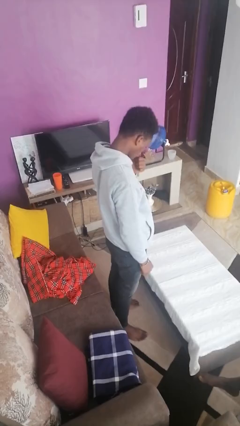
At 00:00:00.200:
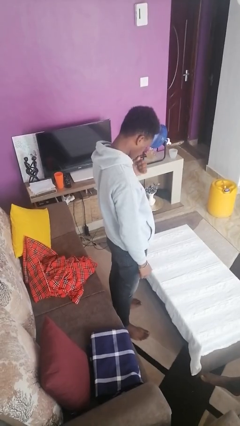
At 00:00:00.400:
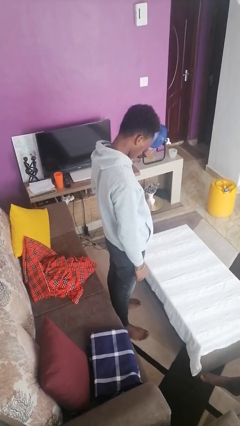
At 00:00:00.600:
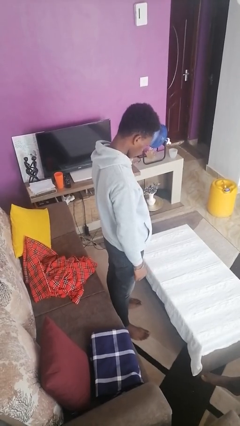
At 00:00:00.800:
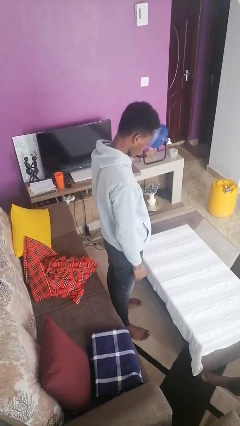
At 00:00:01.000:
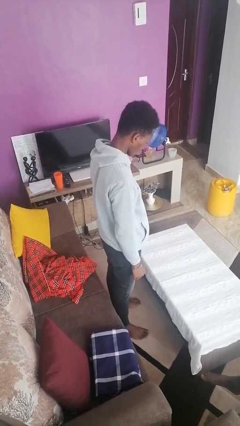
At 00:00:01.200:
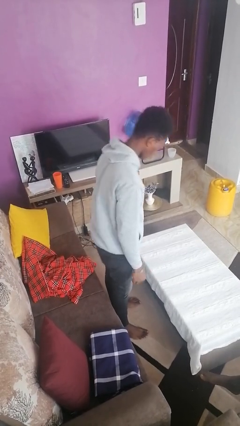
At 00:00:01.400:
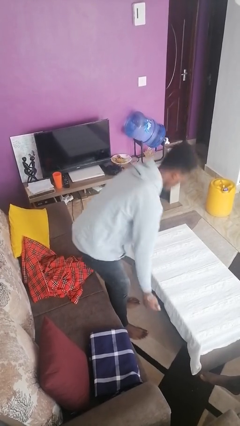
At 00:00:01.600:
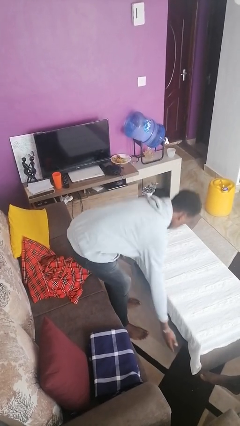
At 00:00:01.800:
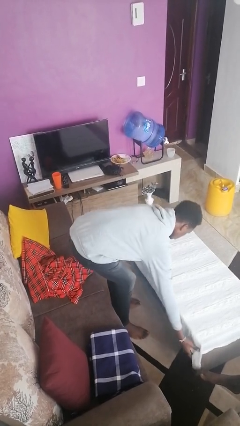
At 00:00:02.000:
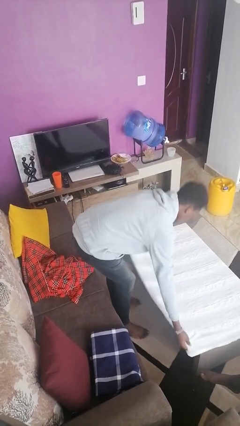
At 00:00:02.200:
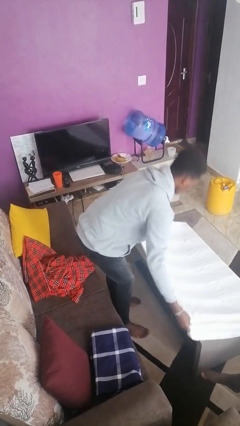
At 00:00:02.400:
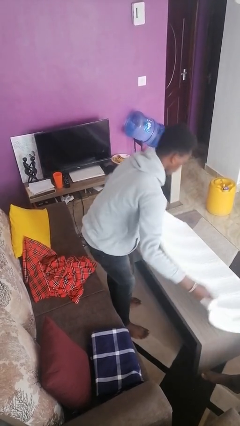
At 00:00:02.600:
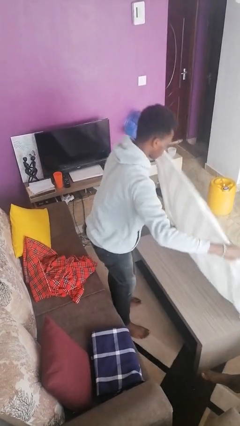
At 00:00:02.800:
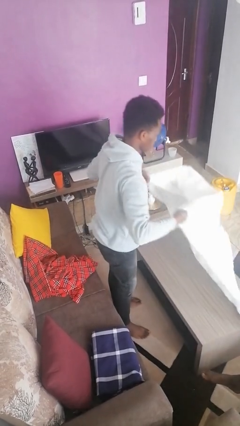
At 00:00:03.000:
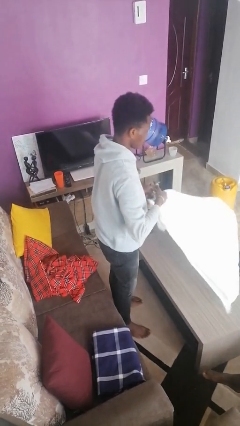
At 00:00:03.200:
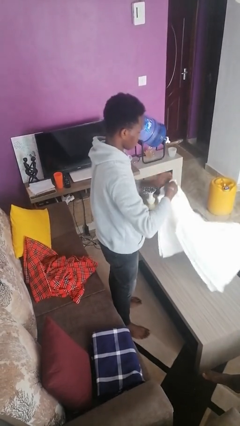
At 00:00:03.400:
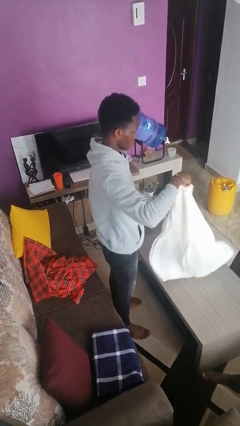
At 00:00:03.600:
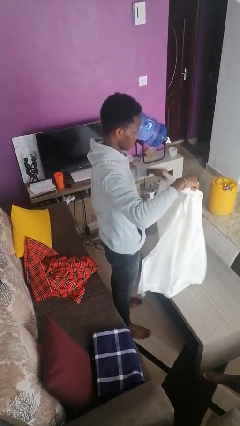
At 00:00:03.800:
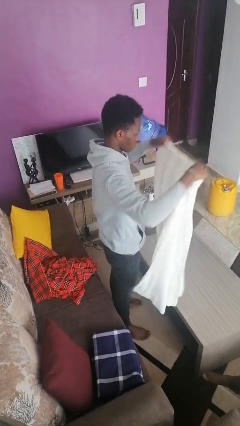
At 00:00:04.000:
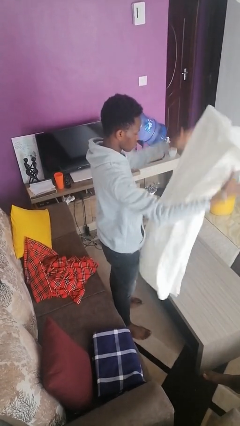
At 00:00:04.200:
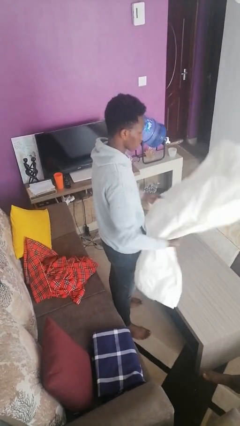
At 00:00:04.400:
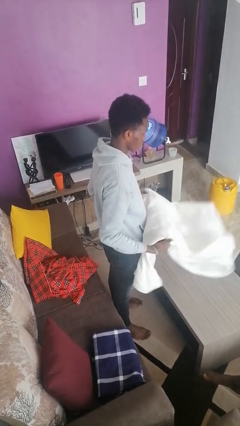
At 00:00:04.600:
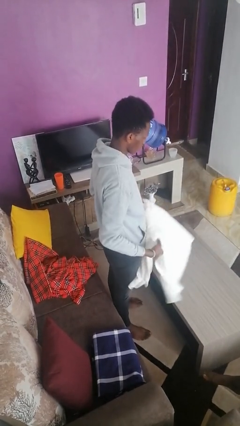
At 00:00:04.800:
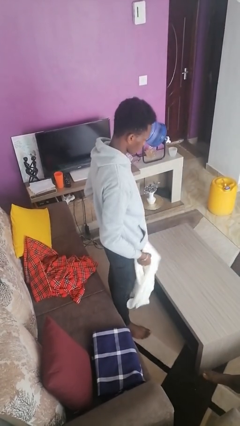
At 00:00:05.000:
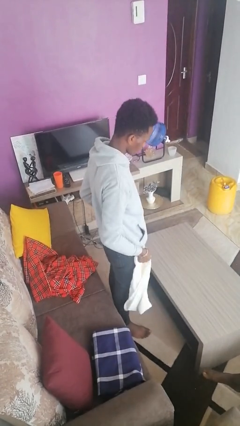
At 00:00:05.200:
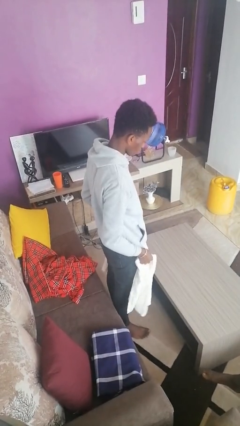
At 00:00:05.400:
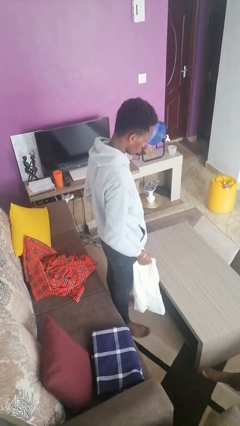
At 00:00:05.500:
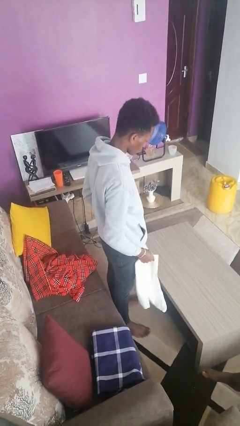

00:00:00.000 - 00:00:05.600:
person folds tablecloth

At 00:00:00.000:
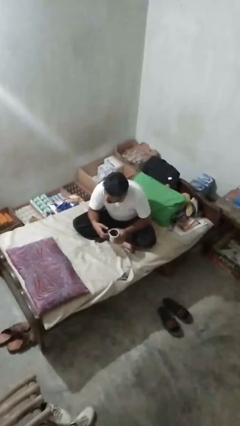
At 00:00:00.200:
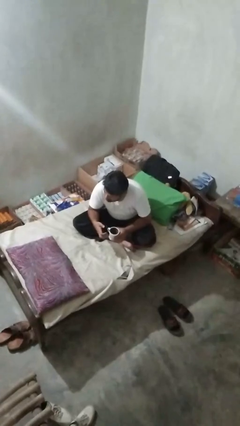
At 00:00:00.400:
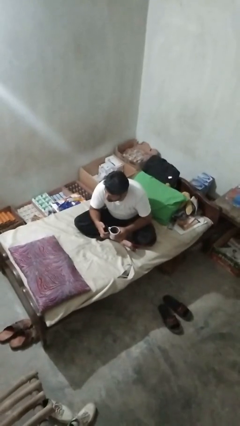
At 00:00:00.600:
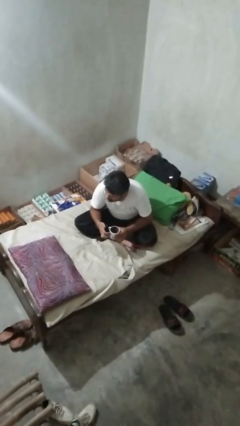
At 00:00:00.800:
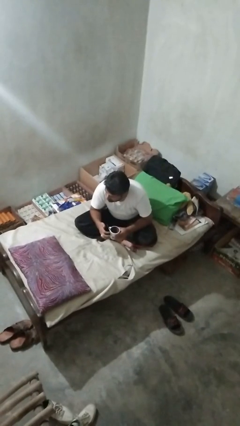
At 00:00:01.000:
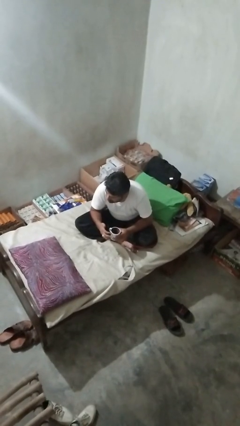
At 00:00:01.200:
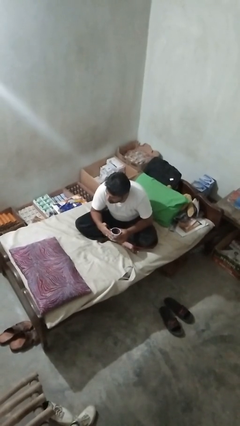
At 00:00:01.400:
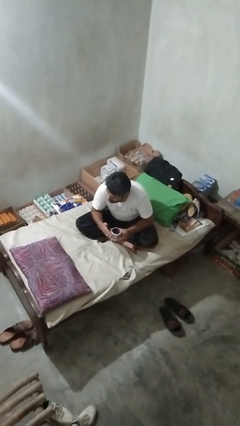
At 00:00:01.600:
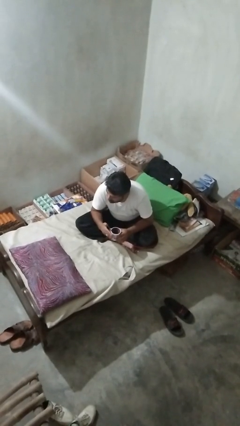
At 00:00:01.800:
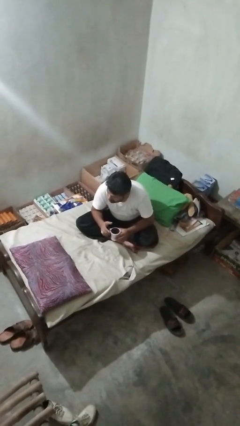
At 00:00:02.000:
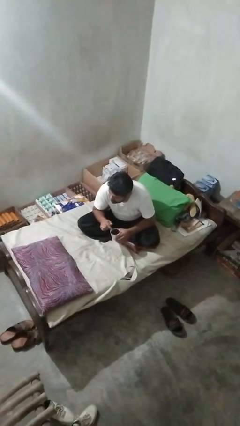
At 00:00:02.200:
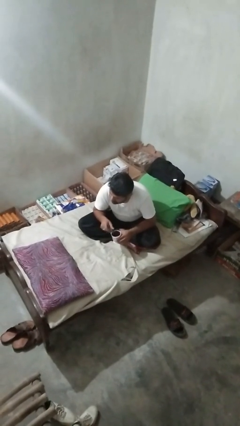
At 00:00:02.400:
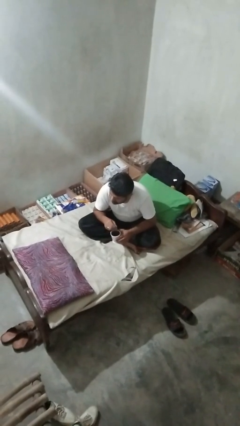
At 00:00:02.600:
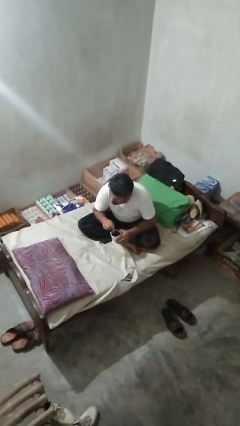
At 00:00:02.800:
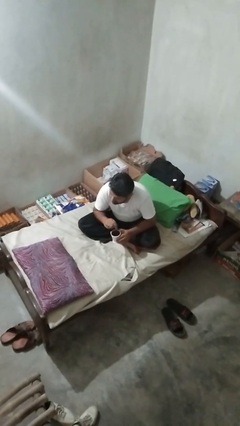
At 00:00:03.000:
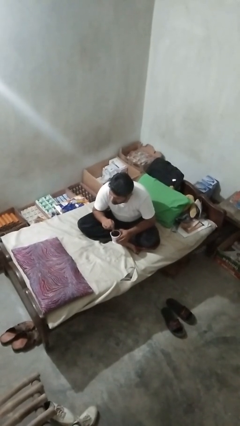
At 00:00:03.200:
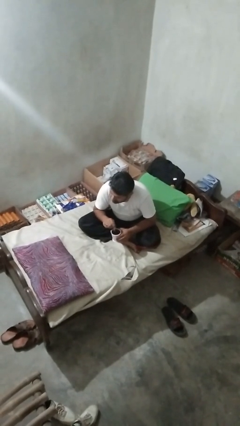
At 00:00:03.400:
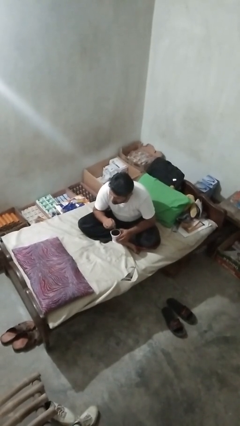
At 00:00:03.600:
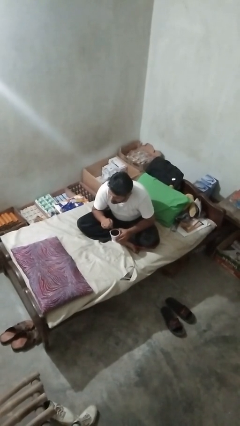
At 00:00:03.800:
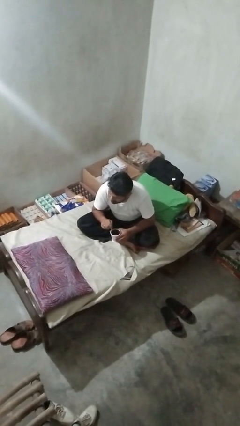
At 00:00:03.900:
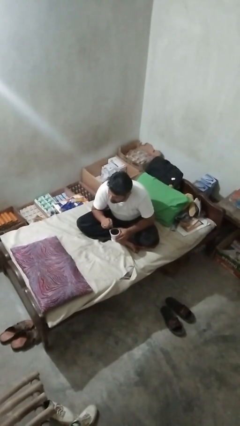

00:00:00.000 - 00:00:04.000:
person stirs mug

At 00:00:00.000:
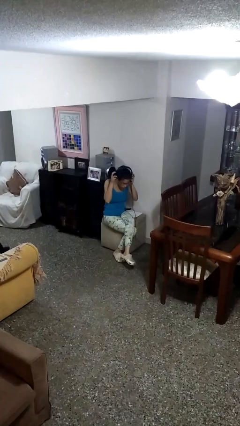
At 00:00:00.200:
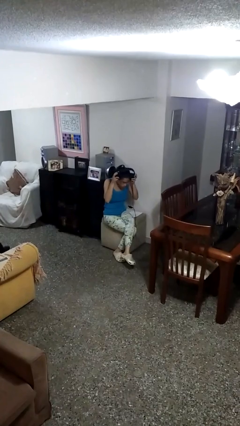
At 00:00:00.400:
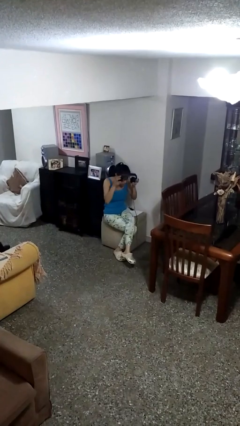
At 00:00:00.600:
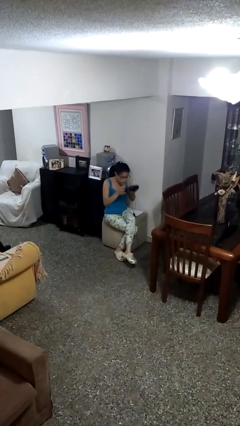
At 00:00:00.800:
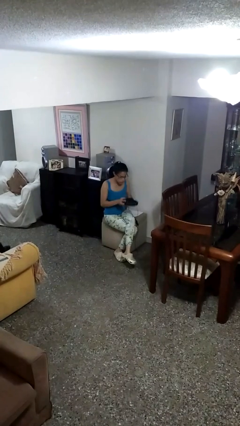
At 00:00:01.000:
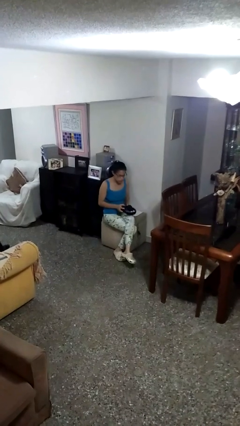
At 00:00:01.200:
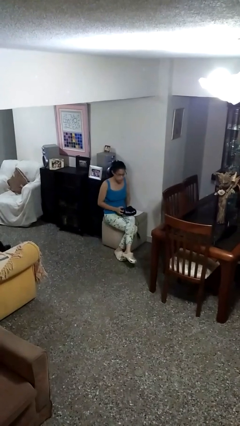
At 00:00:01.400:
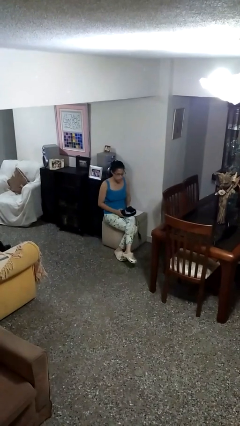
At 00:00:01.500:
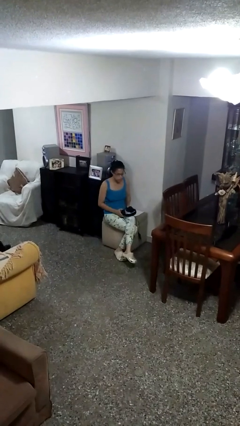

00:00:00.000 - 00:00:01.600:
person takes off headphones

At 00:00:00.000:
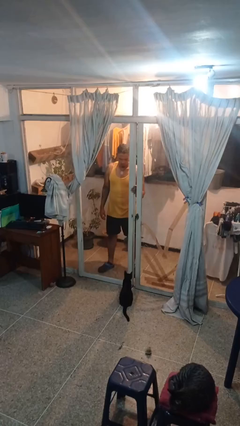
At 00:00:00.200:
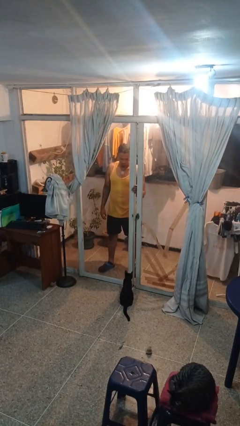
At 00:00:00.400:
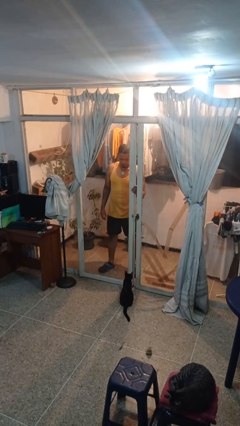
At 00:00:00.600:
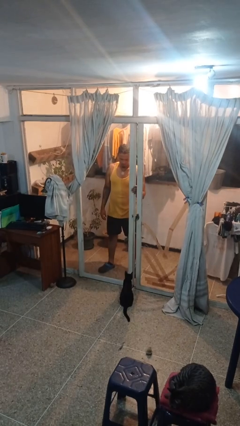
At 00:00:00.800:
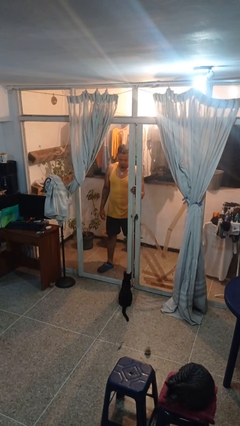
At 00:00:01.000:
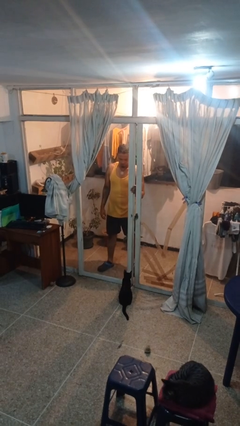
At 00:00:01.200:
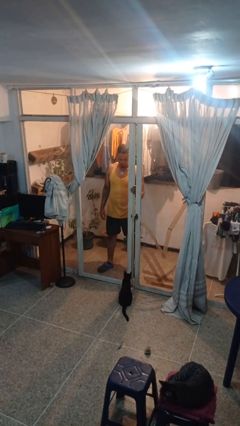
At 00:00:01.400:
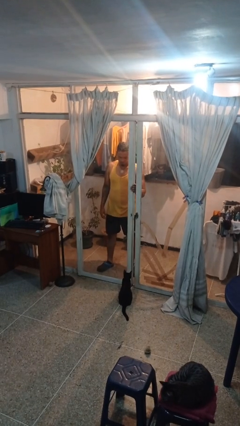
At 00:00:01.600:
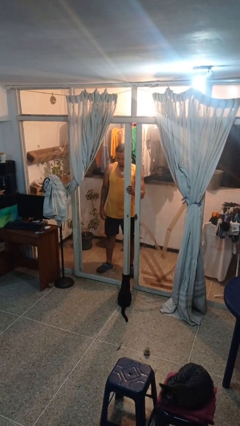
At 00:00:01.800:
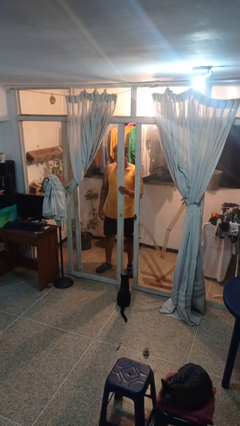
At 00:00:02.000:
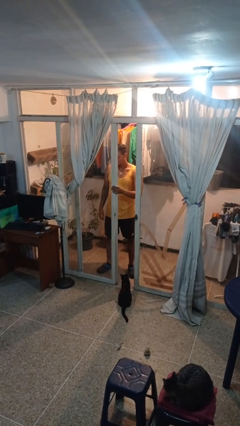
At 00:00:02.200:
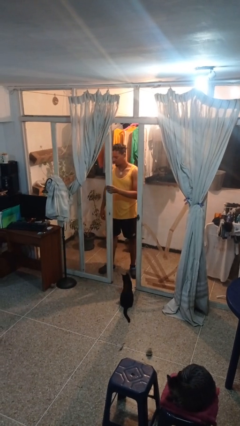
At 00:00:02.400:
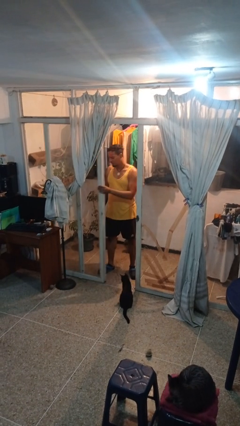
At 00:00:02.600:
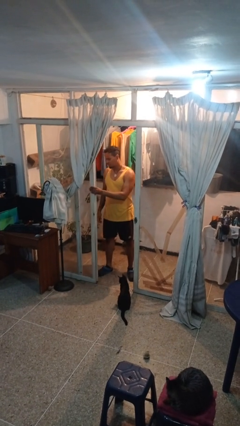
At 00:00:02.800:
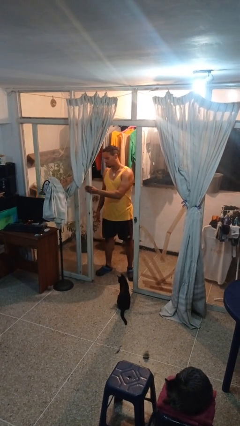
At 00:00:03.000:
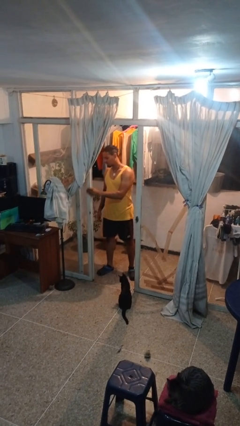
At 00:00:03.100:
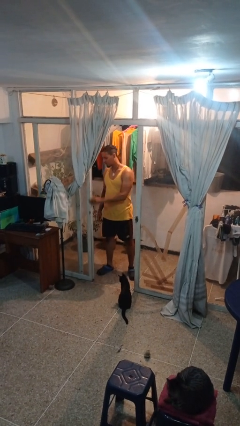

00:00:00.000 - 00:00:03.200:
person opens sliding door

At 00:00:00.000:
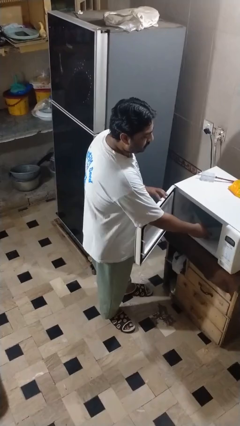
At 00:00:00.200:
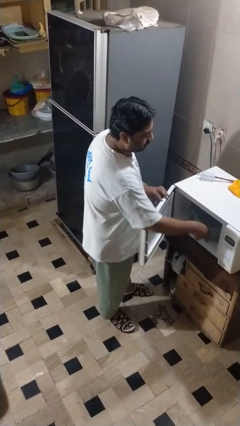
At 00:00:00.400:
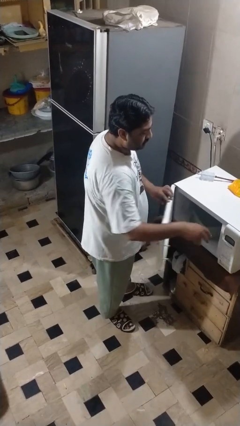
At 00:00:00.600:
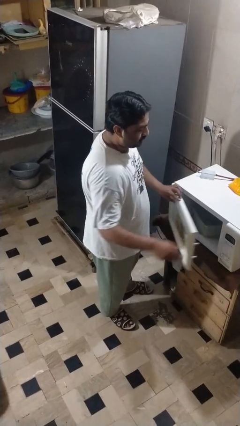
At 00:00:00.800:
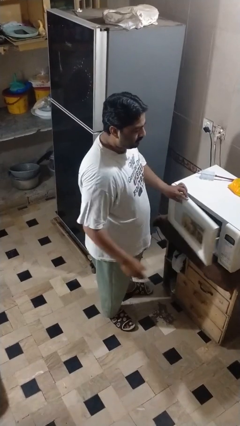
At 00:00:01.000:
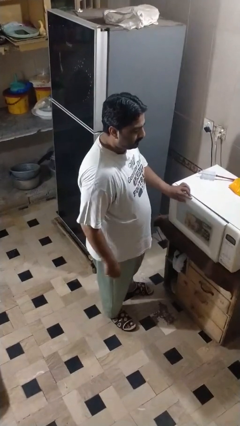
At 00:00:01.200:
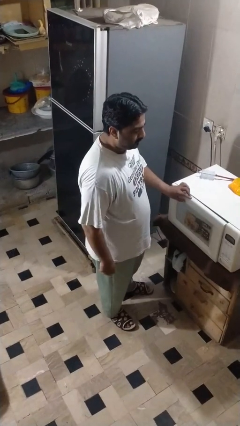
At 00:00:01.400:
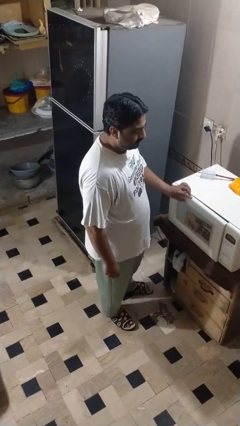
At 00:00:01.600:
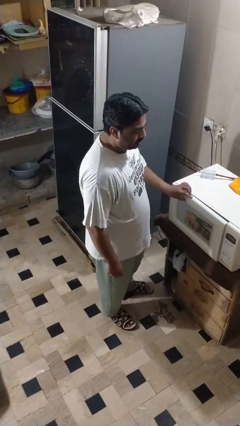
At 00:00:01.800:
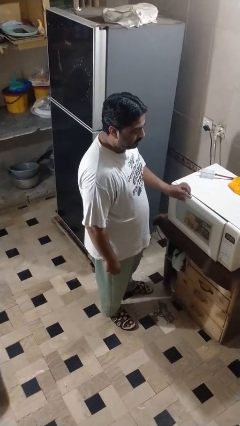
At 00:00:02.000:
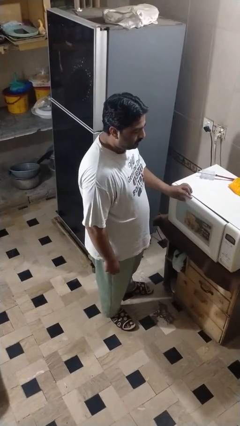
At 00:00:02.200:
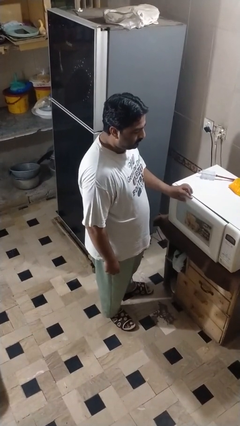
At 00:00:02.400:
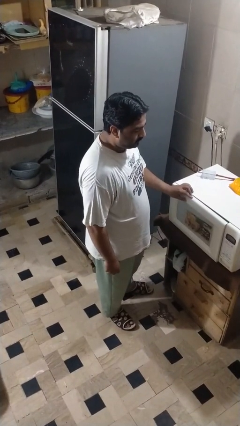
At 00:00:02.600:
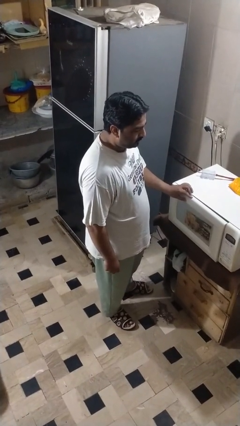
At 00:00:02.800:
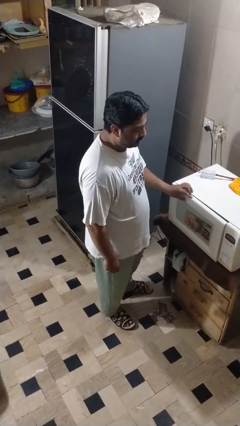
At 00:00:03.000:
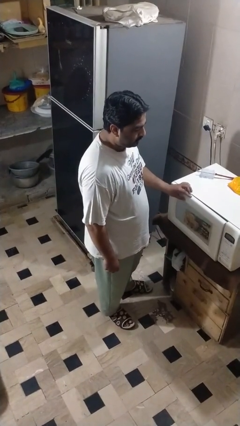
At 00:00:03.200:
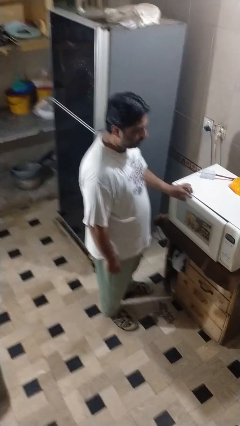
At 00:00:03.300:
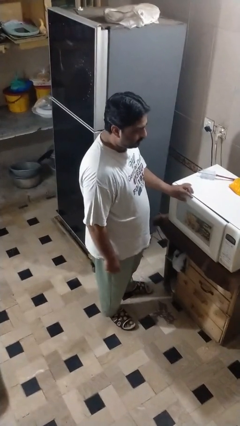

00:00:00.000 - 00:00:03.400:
person closes microwave
